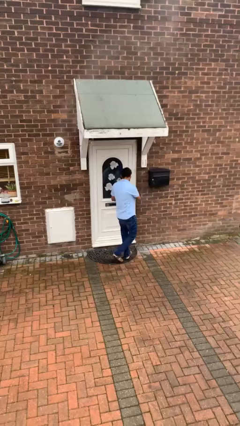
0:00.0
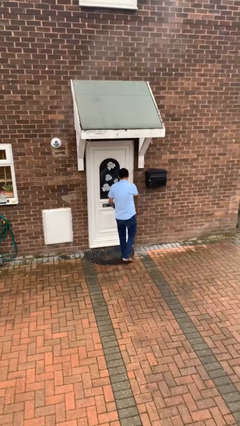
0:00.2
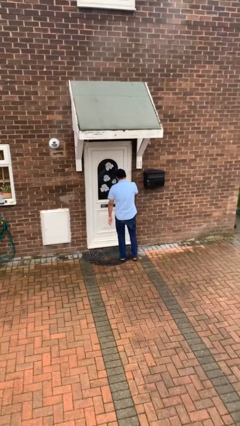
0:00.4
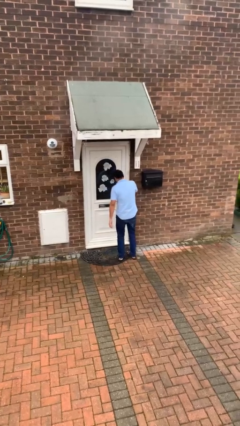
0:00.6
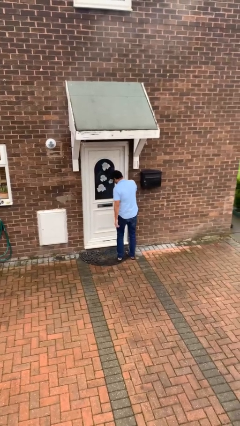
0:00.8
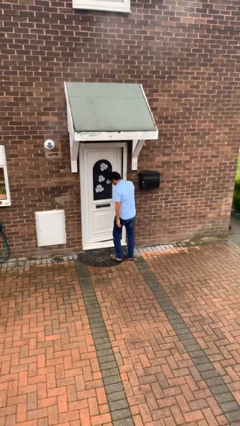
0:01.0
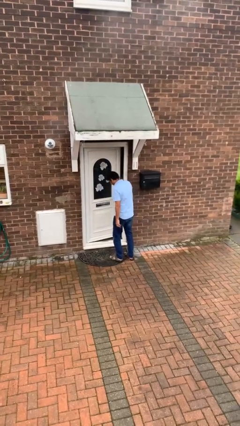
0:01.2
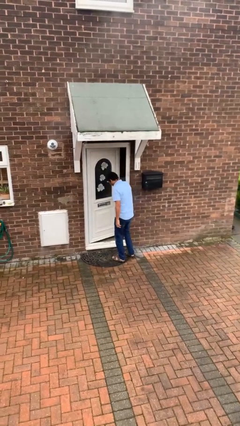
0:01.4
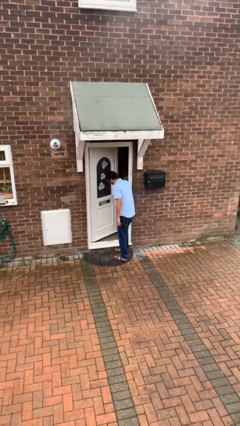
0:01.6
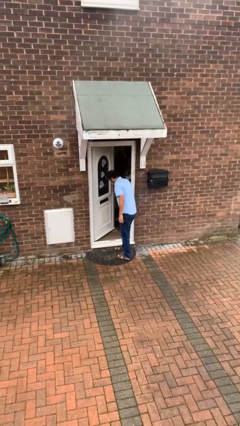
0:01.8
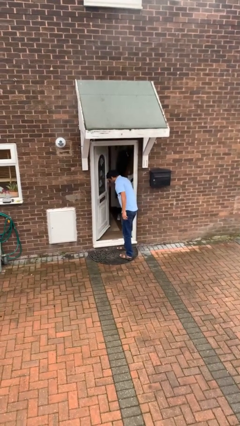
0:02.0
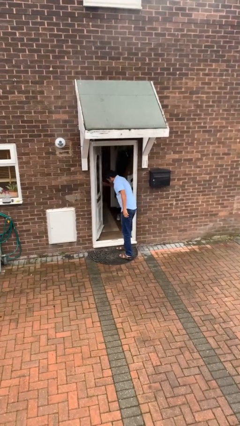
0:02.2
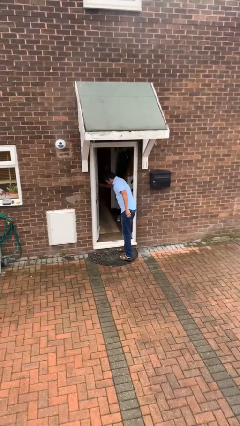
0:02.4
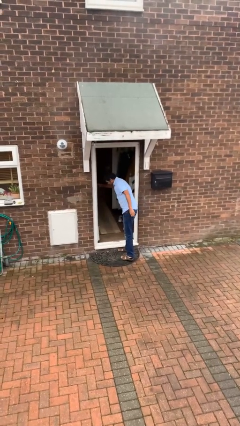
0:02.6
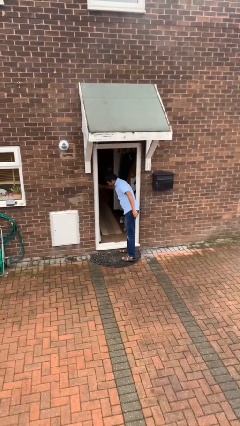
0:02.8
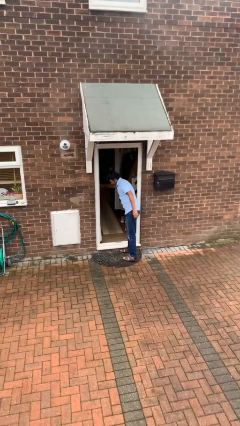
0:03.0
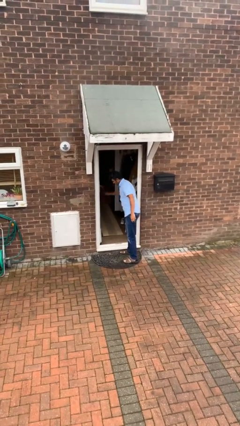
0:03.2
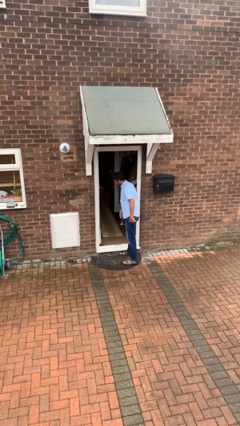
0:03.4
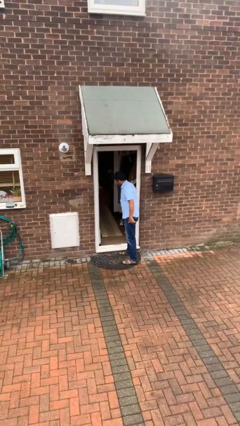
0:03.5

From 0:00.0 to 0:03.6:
person opens facility door

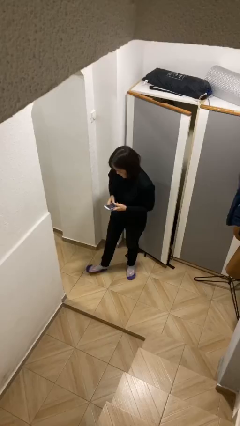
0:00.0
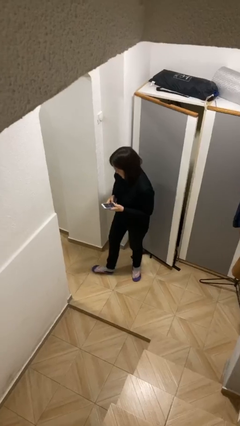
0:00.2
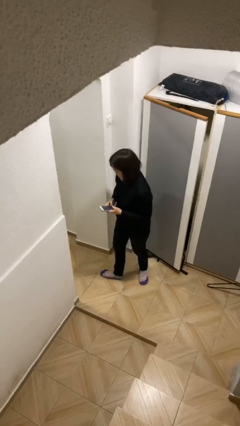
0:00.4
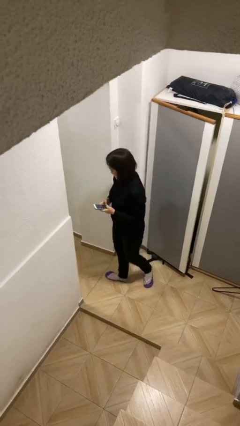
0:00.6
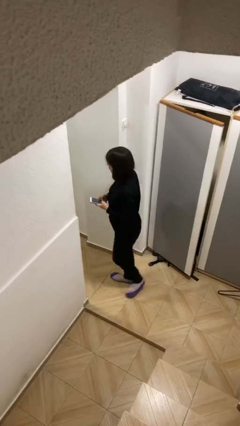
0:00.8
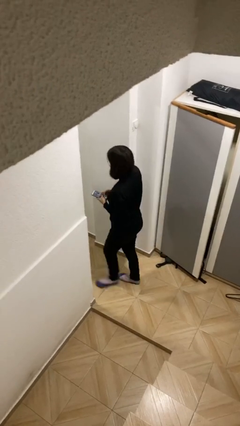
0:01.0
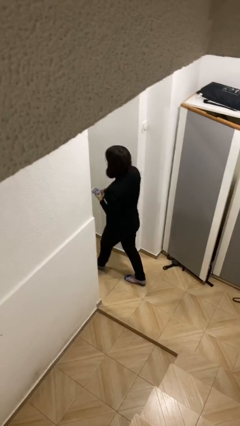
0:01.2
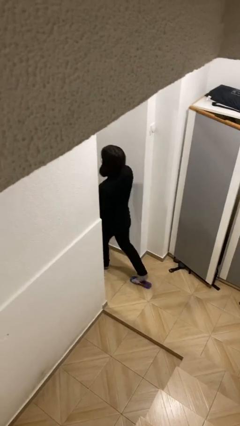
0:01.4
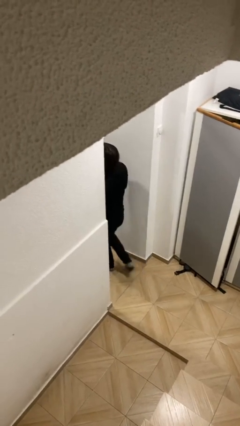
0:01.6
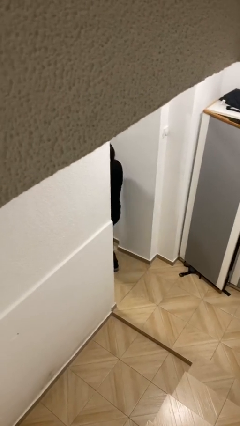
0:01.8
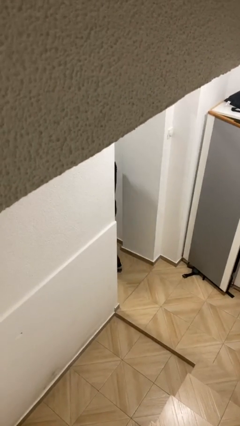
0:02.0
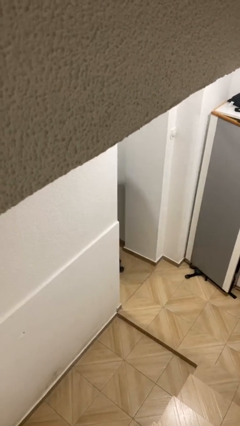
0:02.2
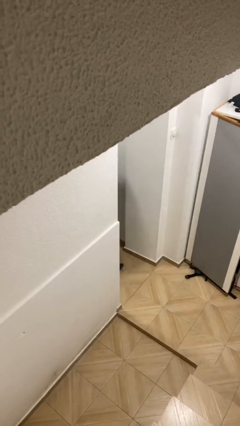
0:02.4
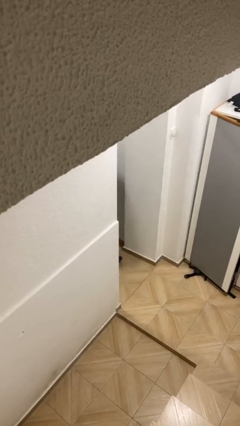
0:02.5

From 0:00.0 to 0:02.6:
person exits scene through structure

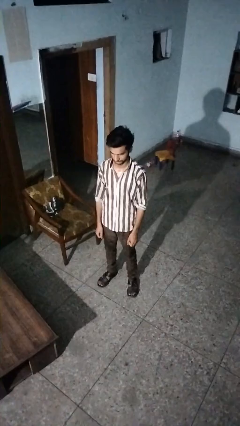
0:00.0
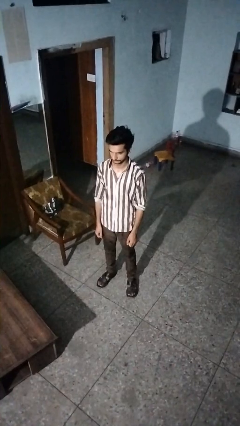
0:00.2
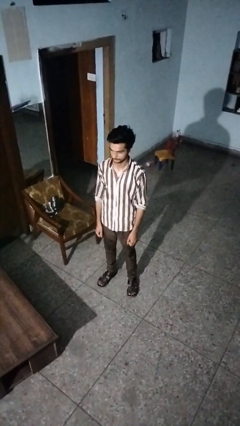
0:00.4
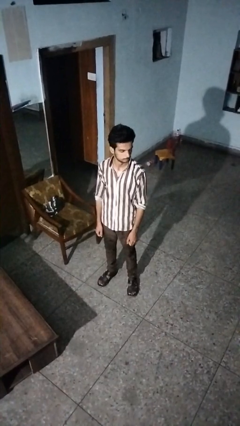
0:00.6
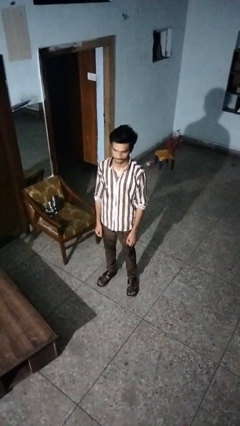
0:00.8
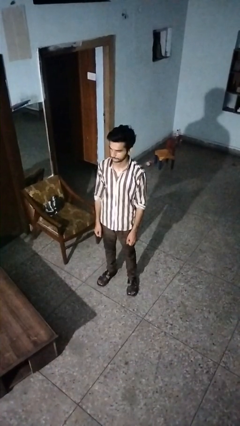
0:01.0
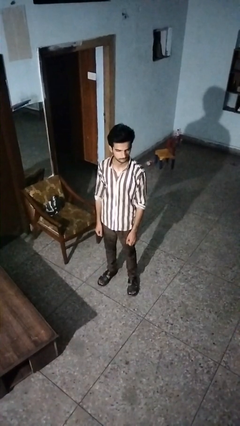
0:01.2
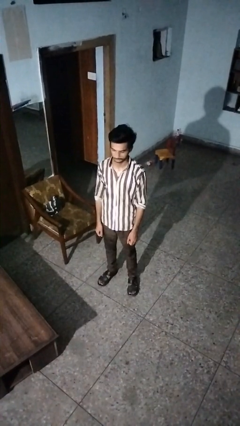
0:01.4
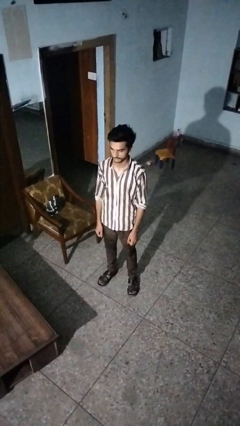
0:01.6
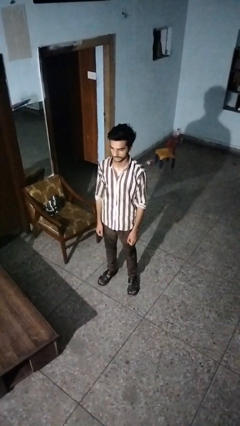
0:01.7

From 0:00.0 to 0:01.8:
person shakes head

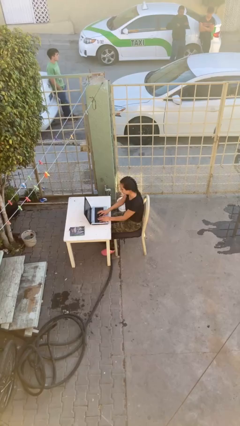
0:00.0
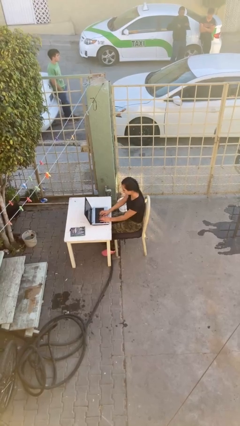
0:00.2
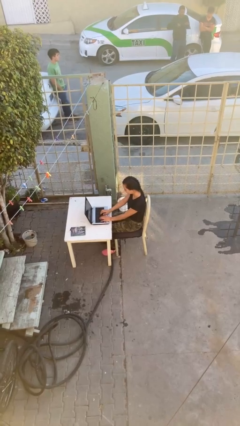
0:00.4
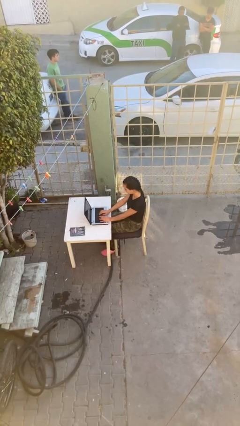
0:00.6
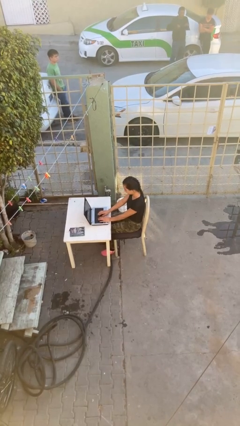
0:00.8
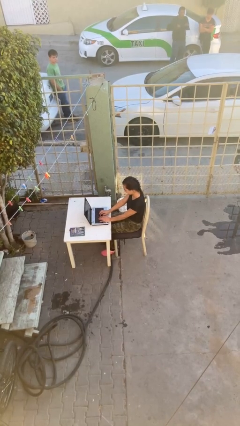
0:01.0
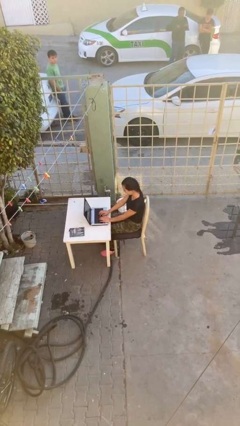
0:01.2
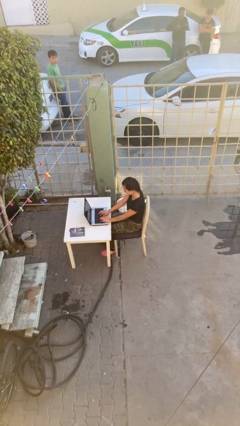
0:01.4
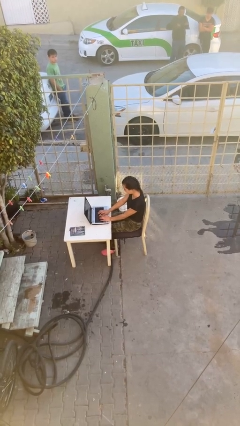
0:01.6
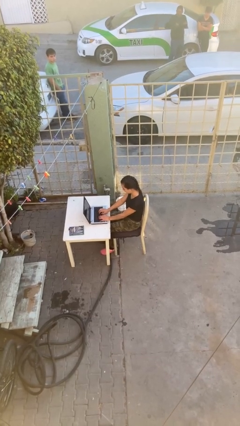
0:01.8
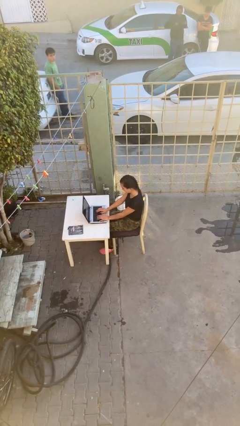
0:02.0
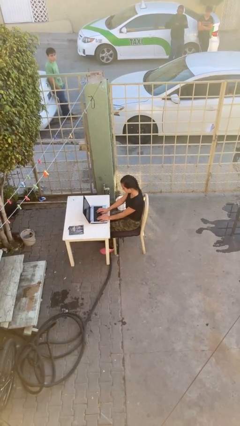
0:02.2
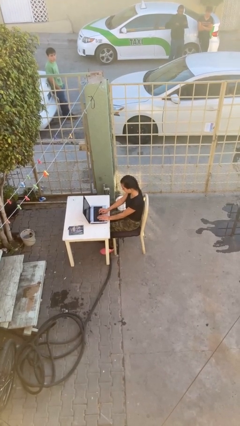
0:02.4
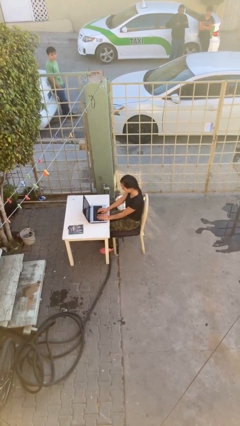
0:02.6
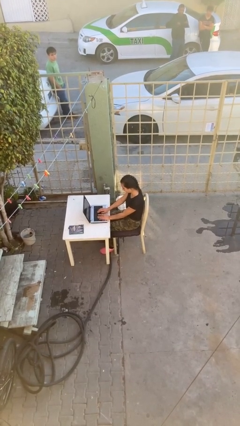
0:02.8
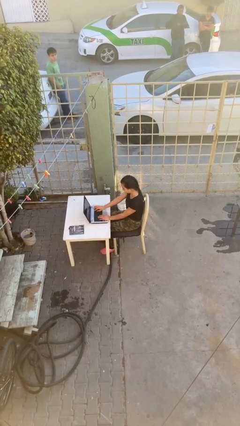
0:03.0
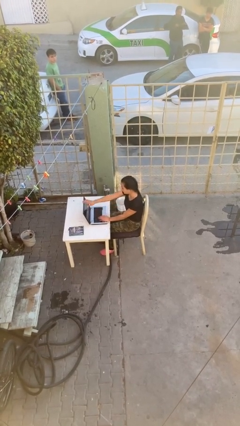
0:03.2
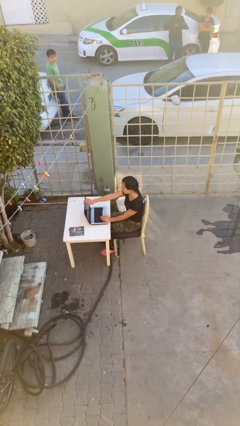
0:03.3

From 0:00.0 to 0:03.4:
person interacts with laptop

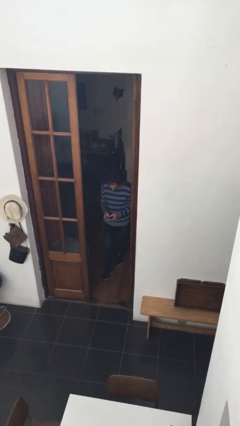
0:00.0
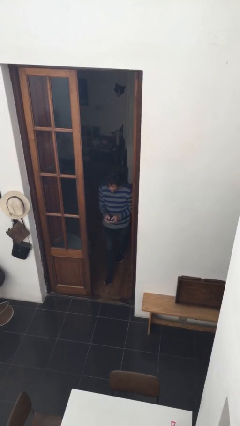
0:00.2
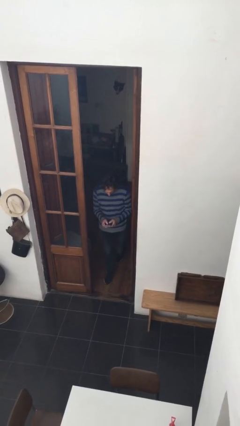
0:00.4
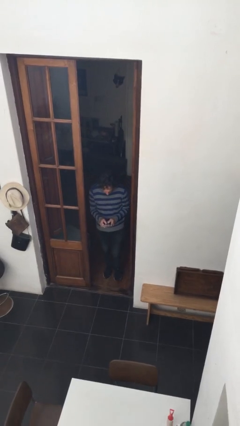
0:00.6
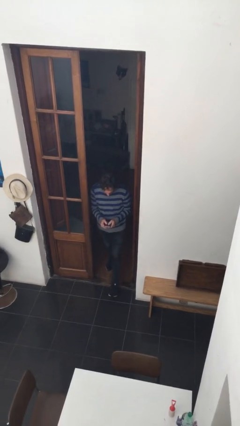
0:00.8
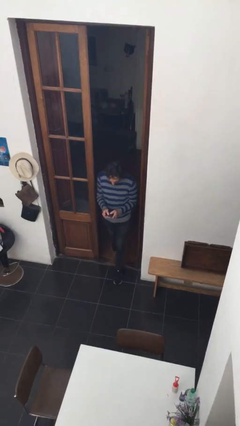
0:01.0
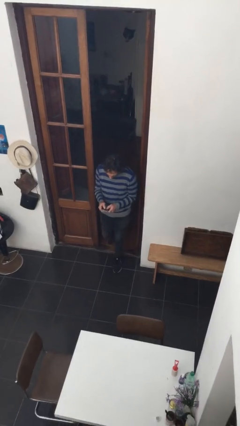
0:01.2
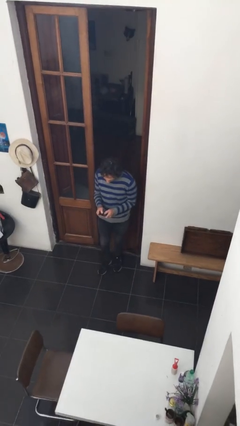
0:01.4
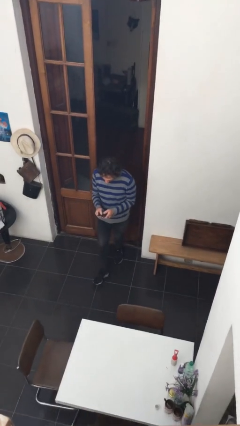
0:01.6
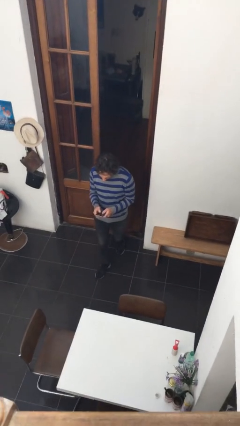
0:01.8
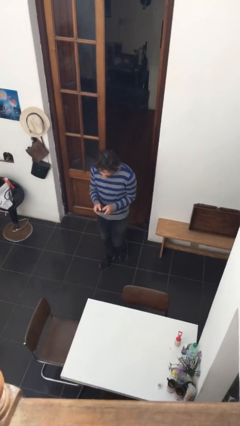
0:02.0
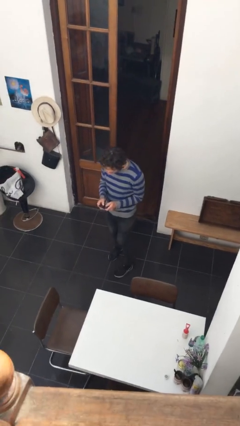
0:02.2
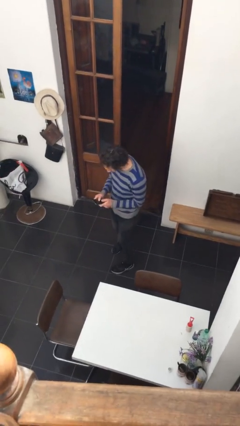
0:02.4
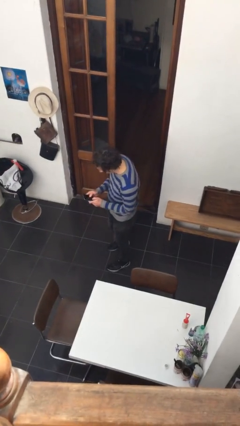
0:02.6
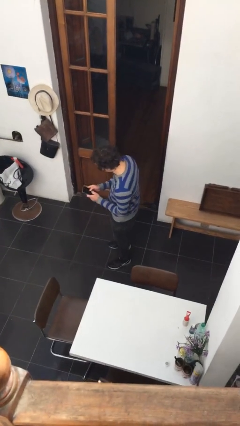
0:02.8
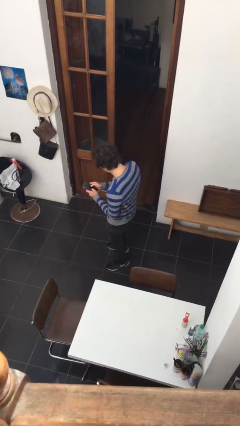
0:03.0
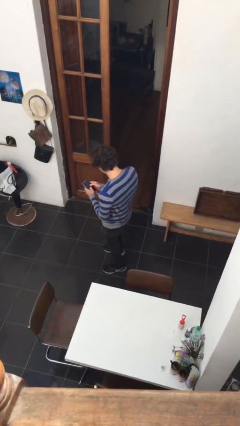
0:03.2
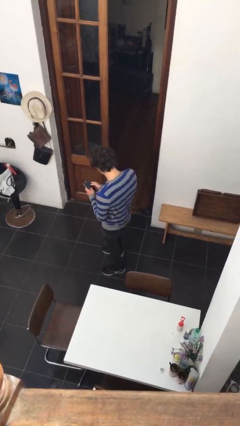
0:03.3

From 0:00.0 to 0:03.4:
person enters scene through structure

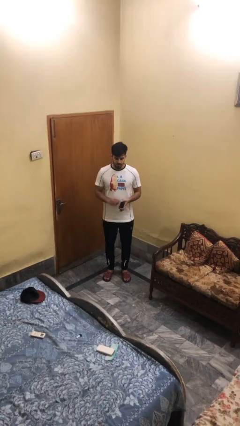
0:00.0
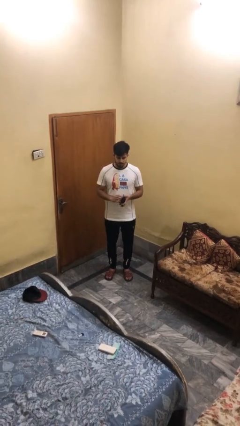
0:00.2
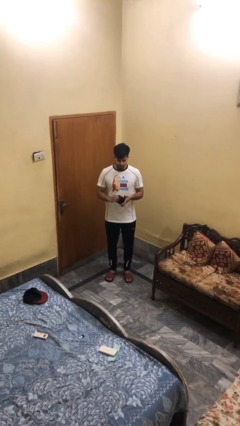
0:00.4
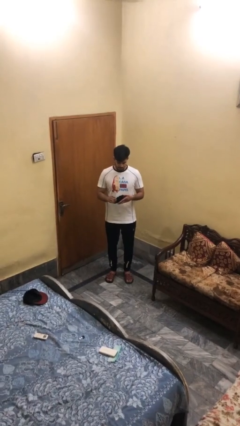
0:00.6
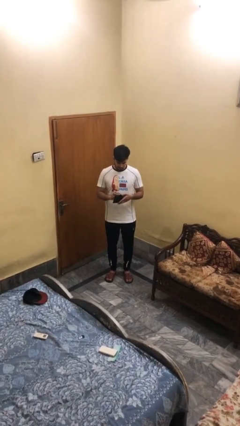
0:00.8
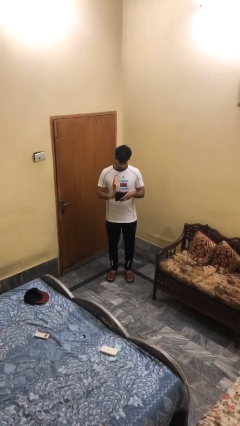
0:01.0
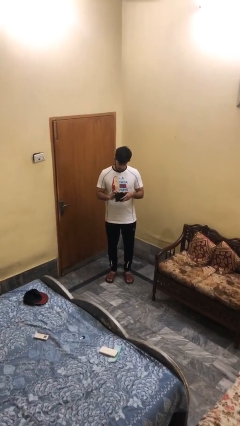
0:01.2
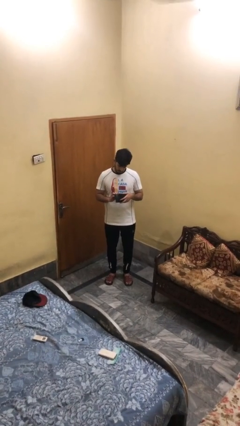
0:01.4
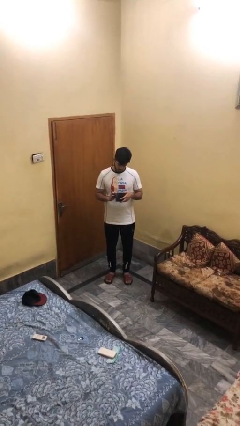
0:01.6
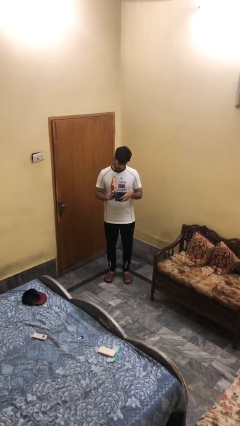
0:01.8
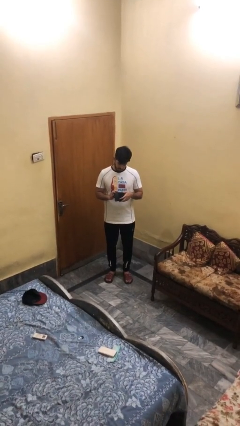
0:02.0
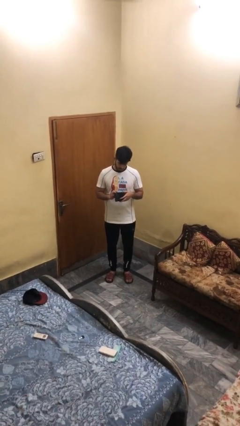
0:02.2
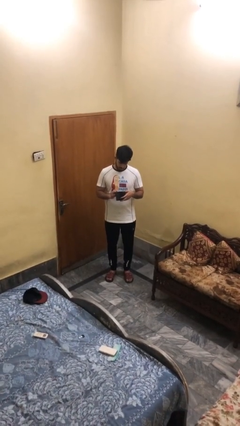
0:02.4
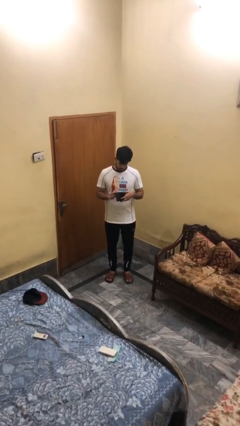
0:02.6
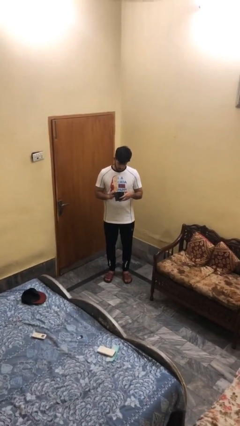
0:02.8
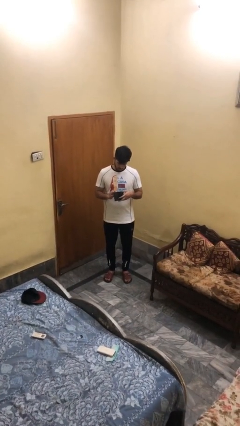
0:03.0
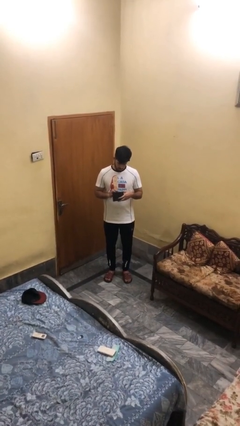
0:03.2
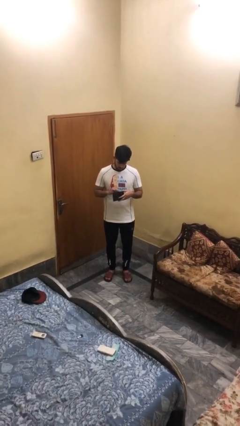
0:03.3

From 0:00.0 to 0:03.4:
person searches in purse
